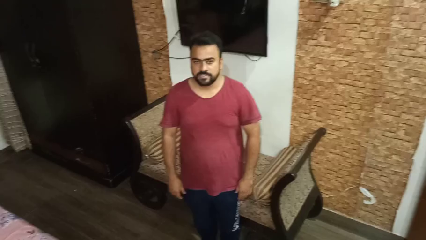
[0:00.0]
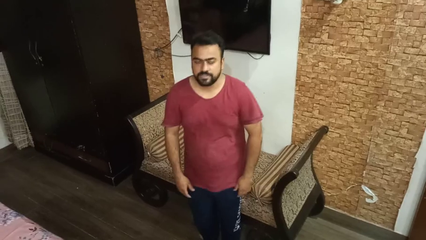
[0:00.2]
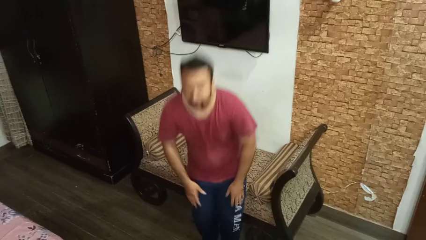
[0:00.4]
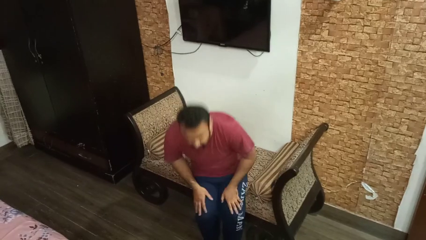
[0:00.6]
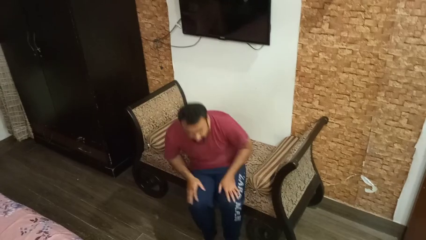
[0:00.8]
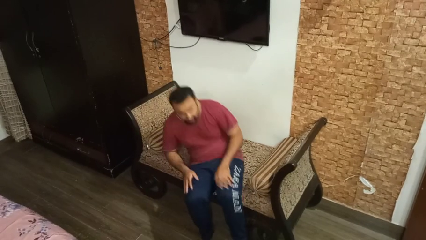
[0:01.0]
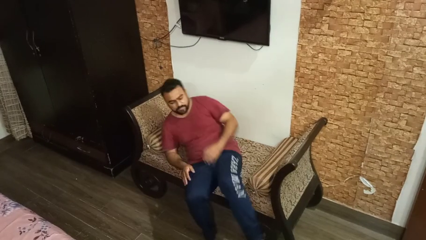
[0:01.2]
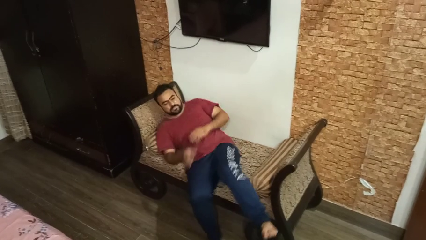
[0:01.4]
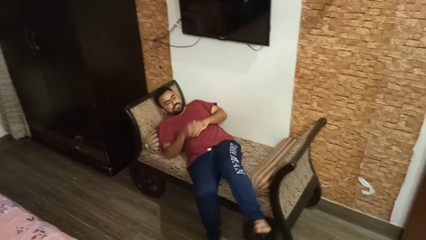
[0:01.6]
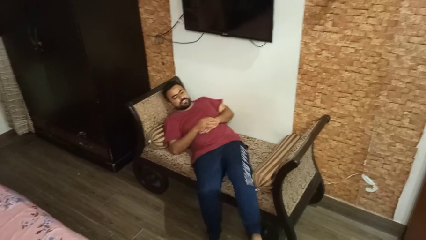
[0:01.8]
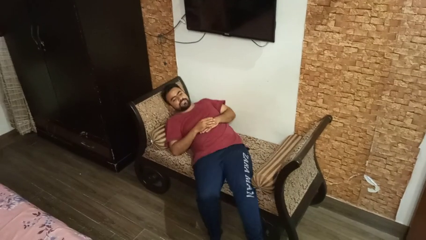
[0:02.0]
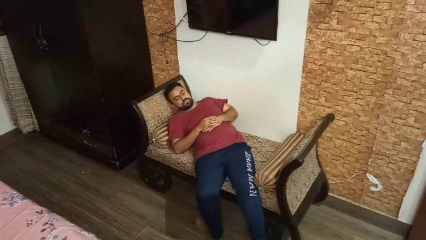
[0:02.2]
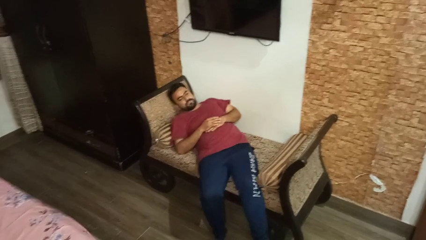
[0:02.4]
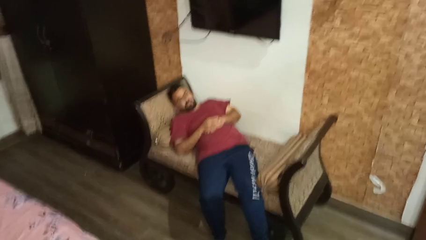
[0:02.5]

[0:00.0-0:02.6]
person lies down on couch

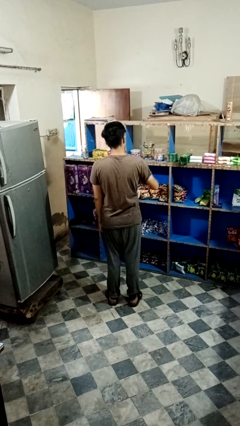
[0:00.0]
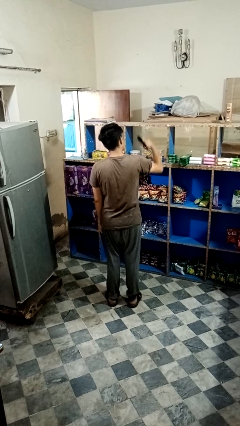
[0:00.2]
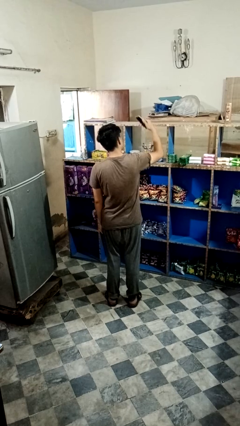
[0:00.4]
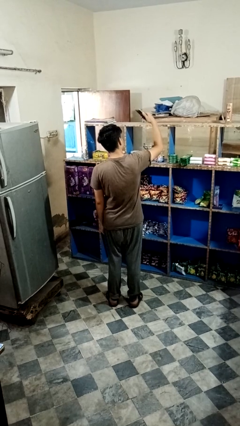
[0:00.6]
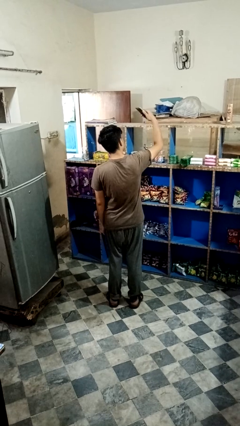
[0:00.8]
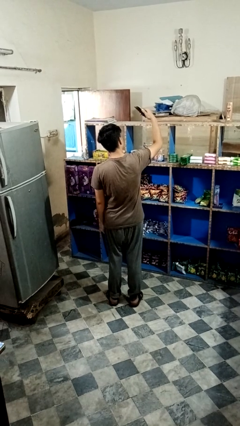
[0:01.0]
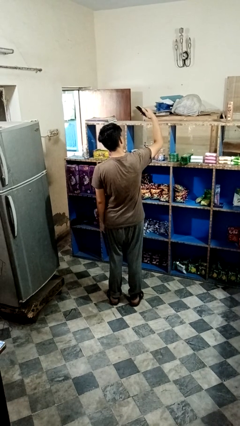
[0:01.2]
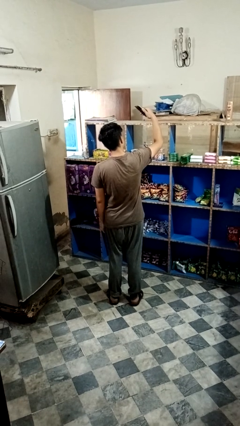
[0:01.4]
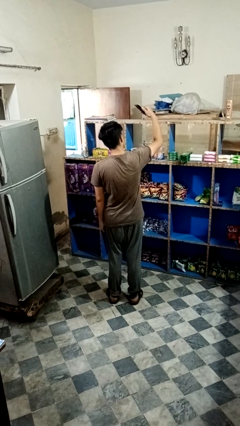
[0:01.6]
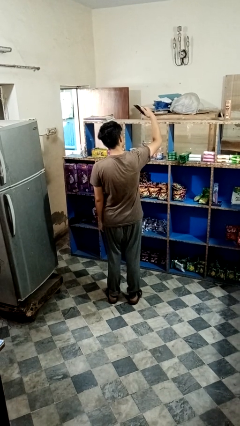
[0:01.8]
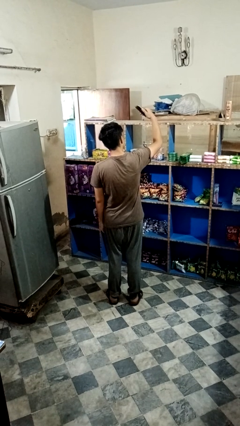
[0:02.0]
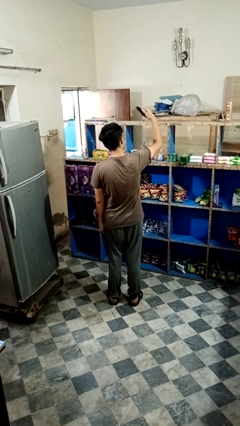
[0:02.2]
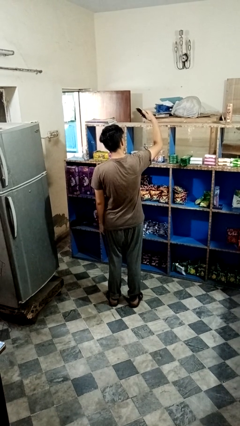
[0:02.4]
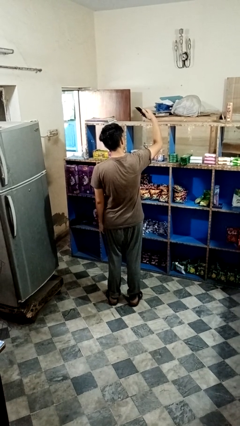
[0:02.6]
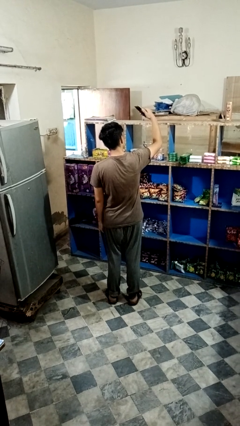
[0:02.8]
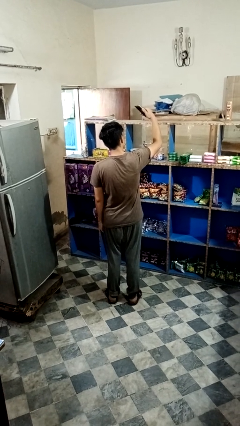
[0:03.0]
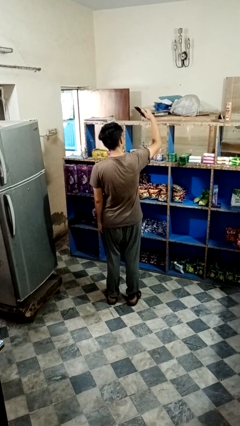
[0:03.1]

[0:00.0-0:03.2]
person takes selfie

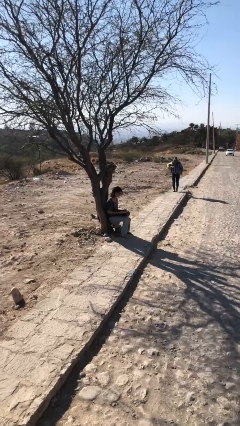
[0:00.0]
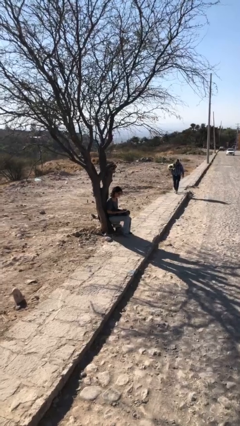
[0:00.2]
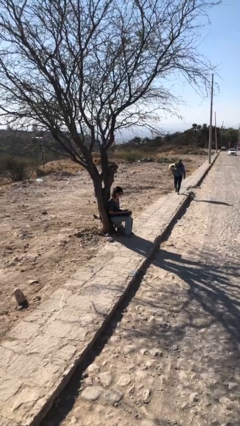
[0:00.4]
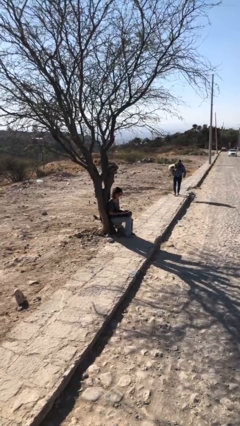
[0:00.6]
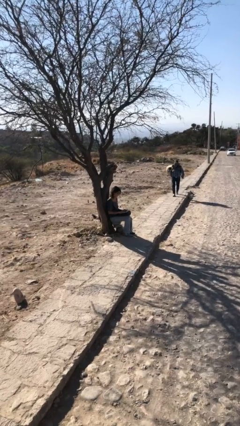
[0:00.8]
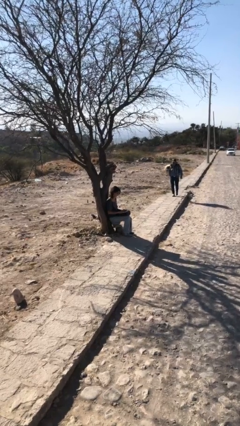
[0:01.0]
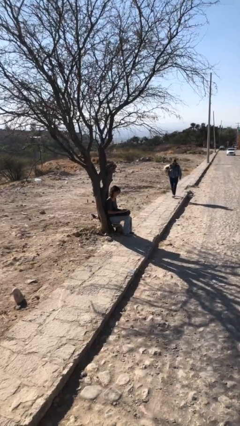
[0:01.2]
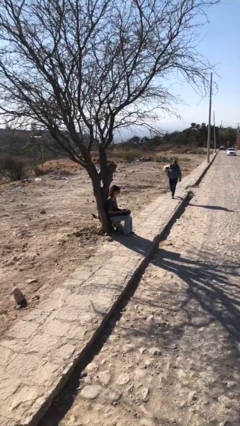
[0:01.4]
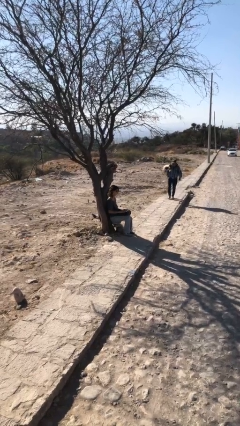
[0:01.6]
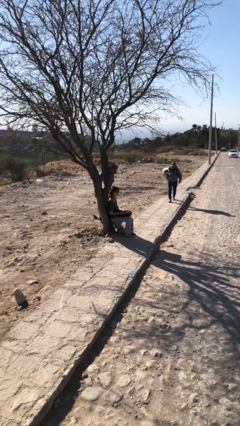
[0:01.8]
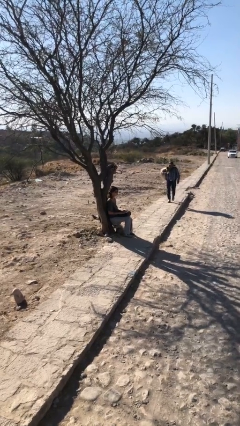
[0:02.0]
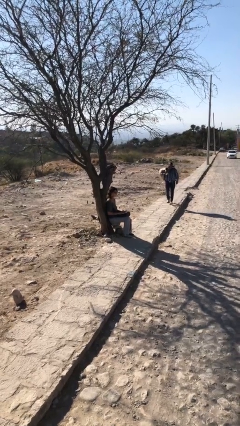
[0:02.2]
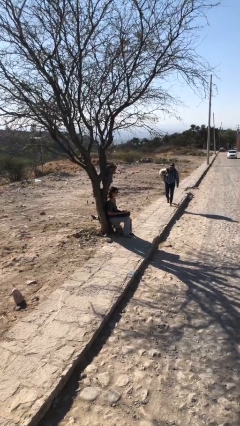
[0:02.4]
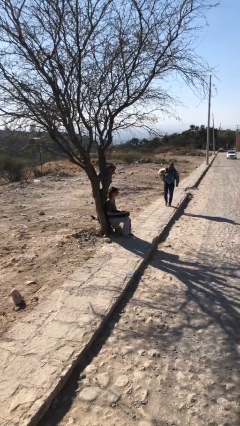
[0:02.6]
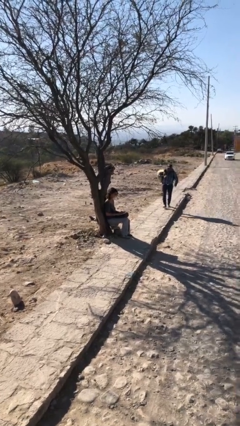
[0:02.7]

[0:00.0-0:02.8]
person interacts with laptop

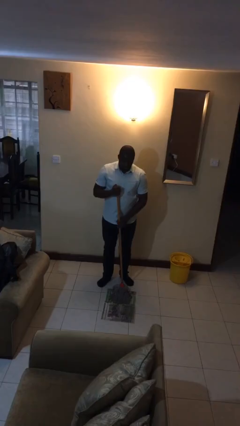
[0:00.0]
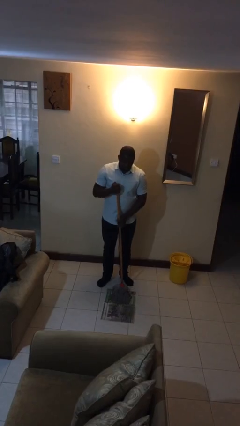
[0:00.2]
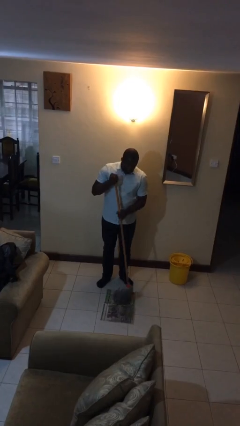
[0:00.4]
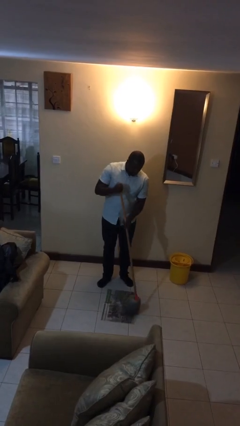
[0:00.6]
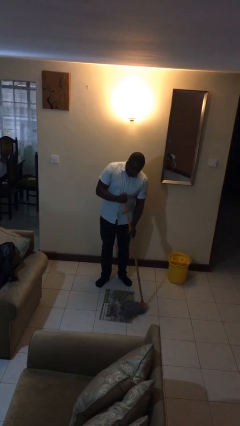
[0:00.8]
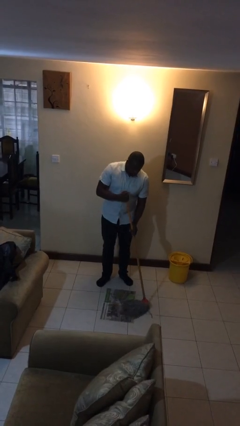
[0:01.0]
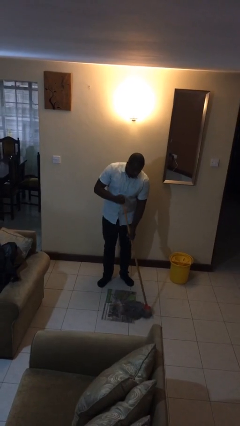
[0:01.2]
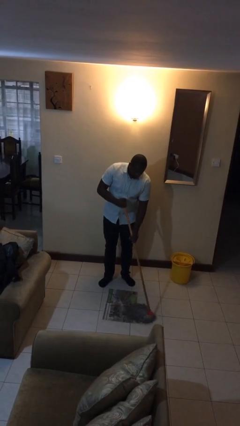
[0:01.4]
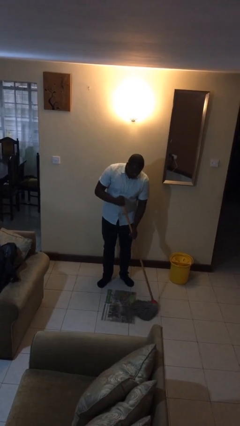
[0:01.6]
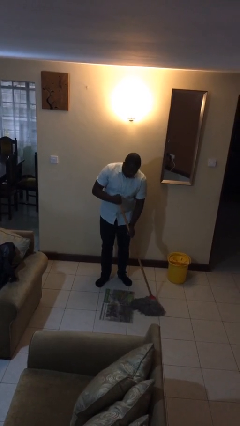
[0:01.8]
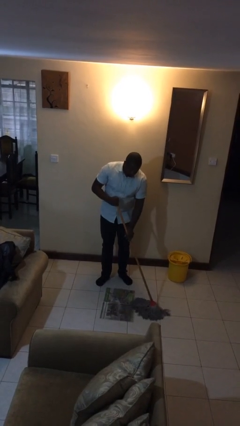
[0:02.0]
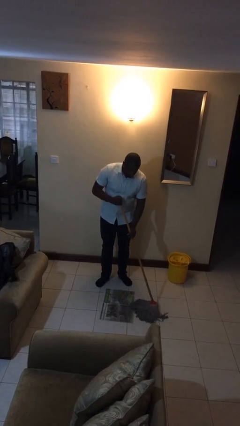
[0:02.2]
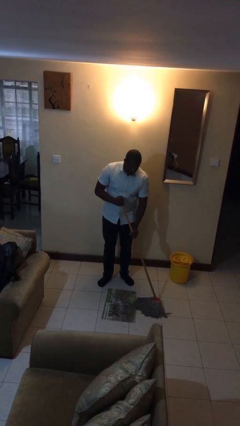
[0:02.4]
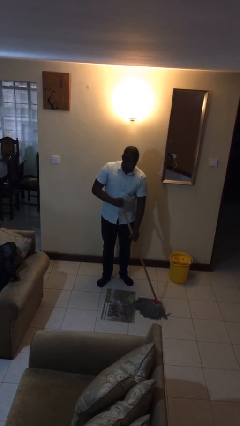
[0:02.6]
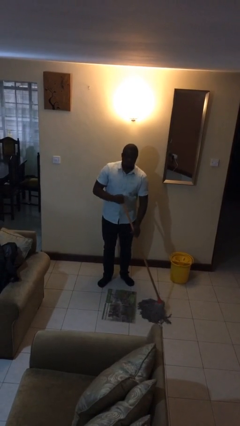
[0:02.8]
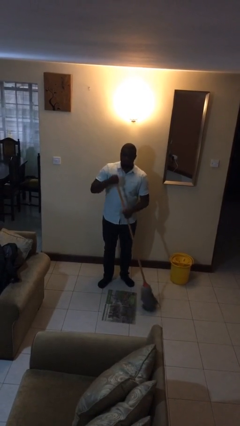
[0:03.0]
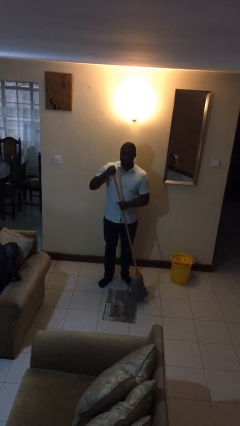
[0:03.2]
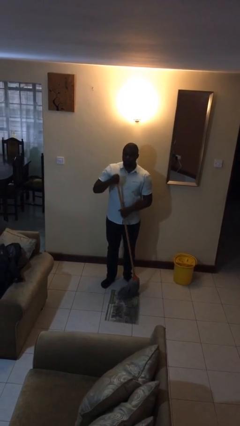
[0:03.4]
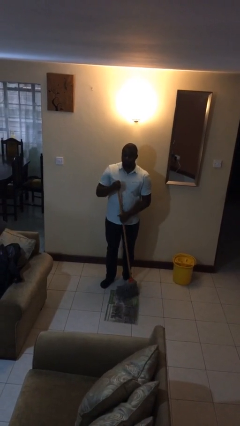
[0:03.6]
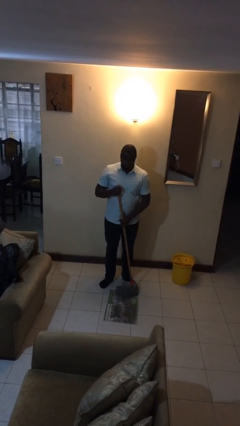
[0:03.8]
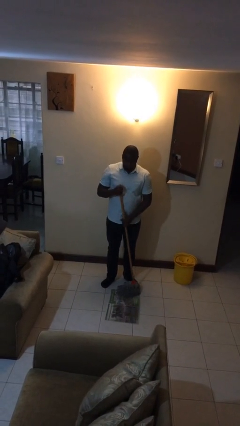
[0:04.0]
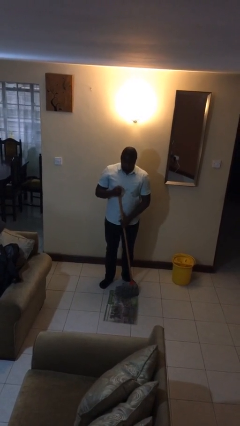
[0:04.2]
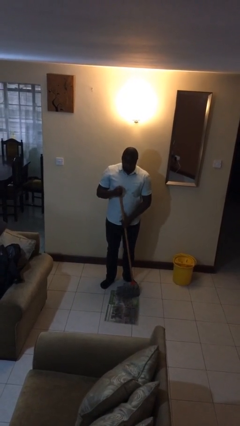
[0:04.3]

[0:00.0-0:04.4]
person mops

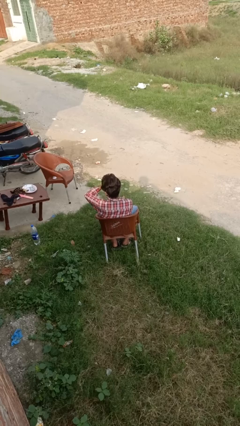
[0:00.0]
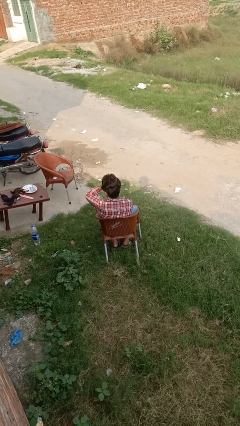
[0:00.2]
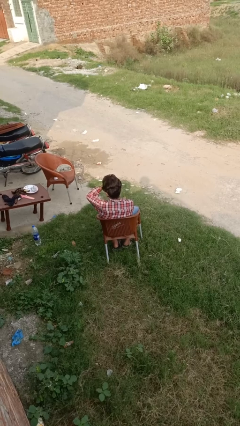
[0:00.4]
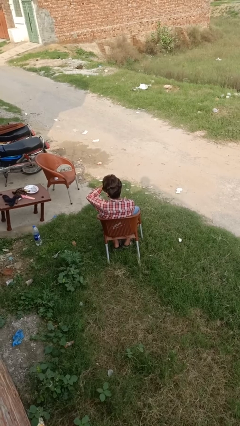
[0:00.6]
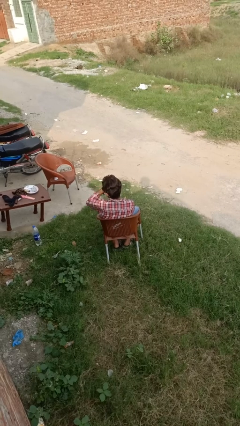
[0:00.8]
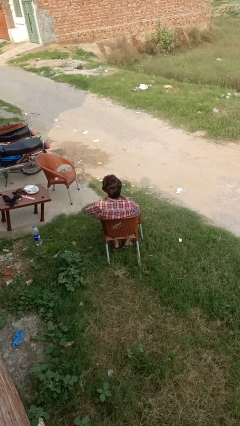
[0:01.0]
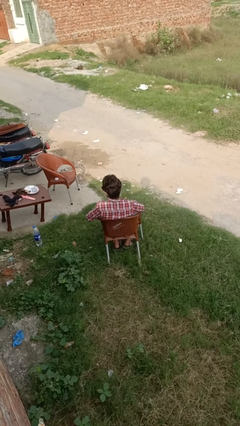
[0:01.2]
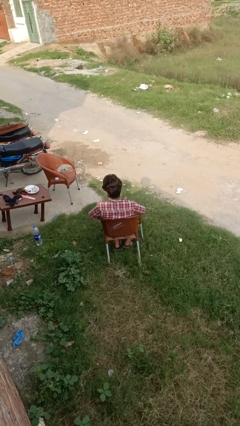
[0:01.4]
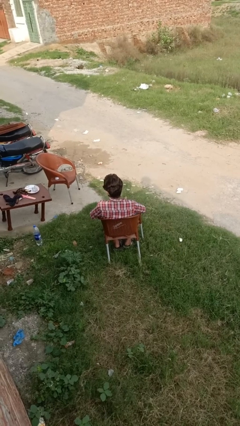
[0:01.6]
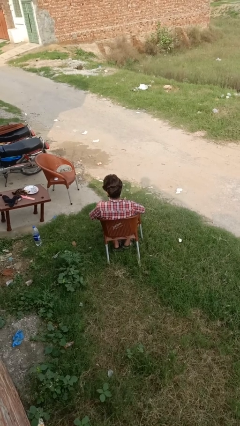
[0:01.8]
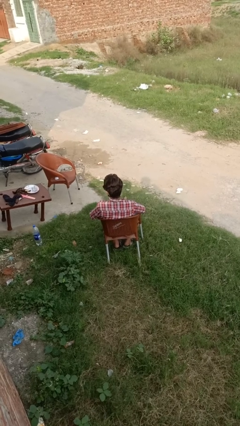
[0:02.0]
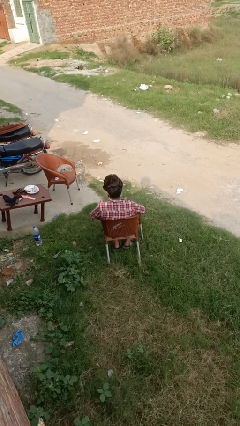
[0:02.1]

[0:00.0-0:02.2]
person takes off wristwatch

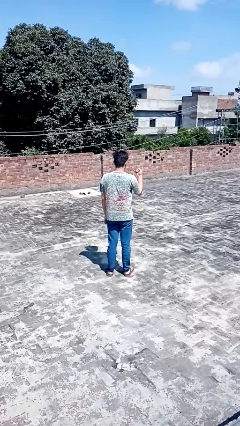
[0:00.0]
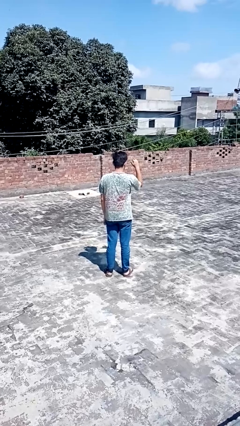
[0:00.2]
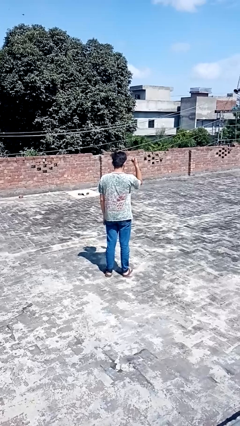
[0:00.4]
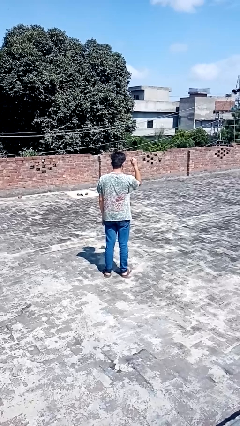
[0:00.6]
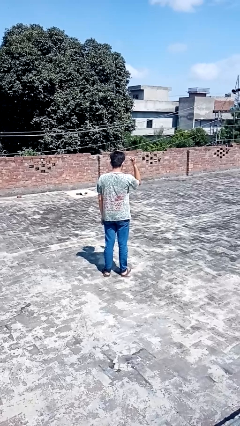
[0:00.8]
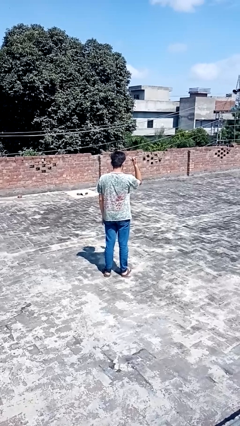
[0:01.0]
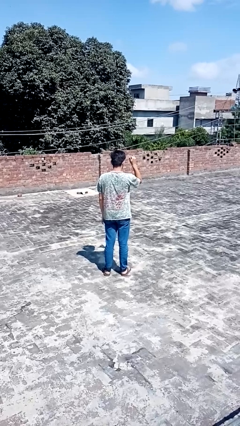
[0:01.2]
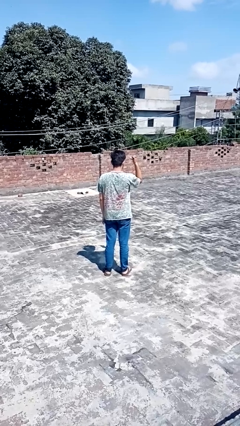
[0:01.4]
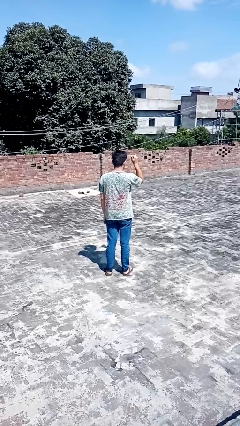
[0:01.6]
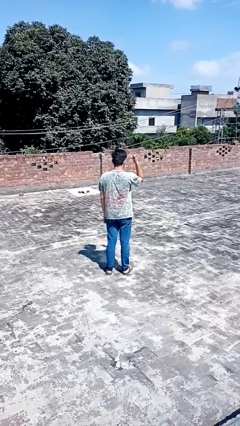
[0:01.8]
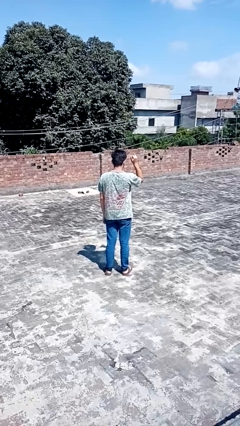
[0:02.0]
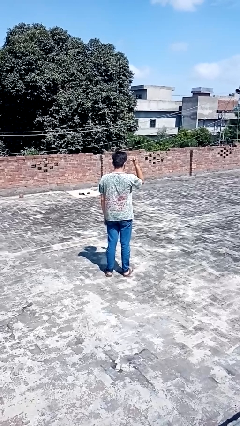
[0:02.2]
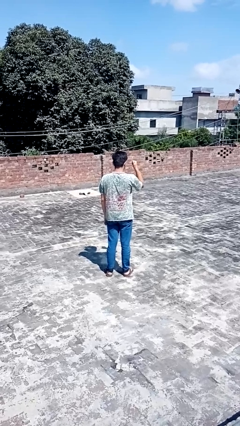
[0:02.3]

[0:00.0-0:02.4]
person gestures hang loose
